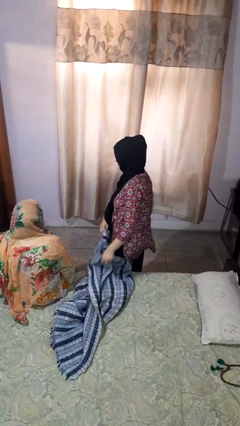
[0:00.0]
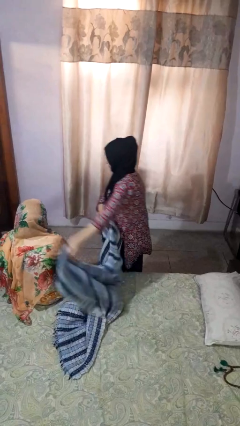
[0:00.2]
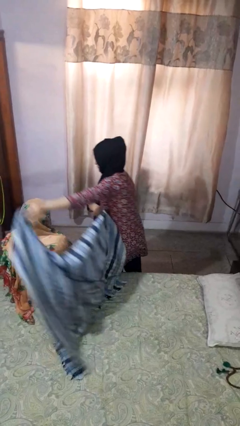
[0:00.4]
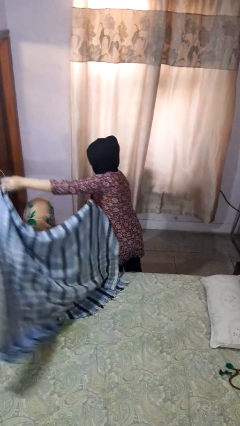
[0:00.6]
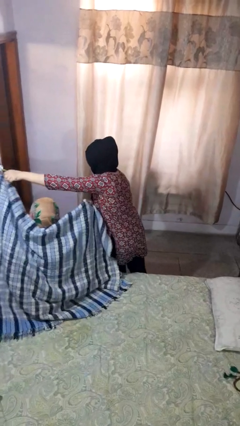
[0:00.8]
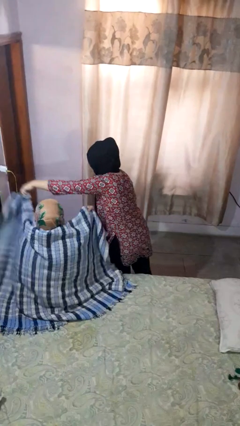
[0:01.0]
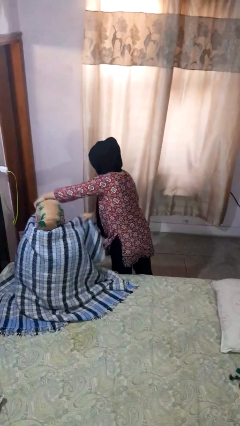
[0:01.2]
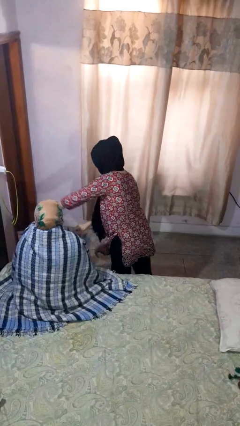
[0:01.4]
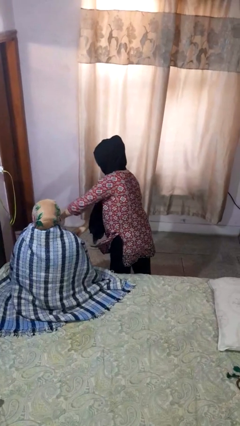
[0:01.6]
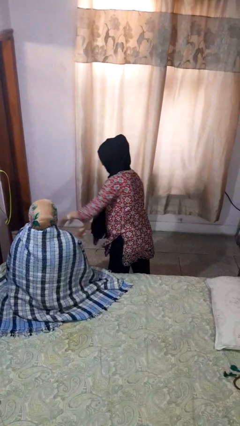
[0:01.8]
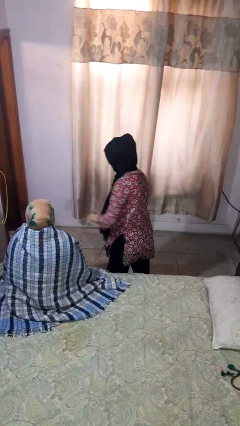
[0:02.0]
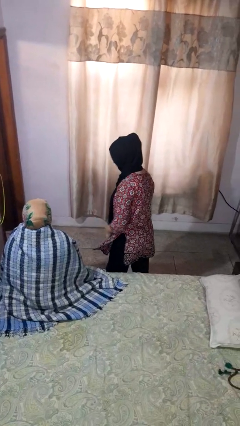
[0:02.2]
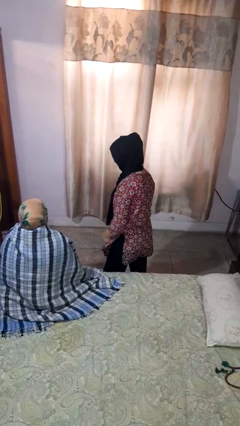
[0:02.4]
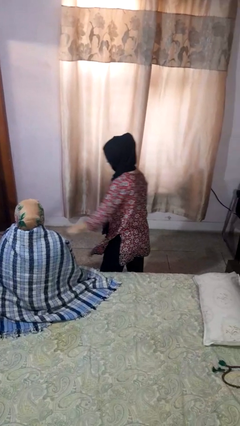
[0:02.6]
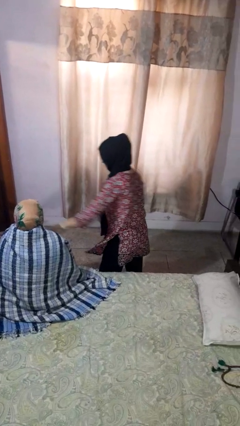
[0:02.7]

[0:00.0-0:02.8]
person covers friend with blanket

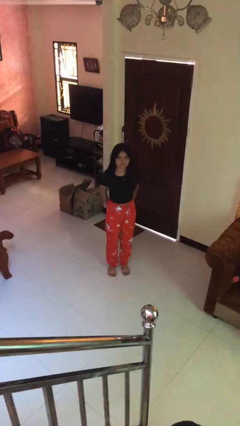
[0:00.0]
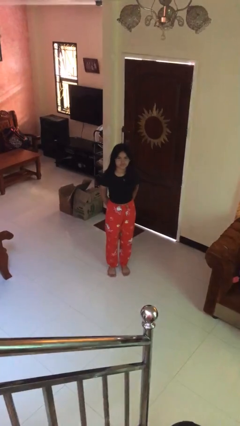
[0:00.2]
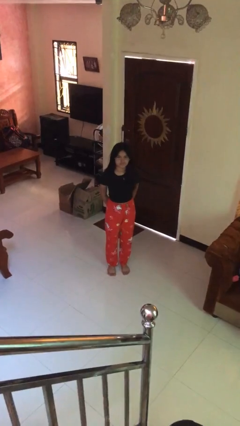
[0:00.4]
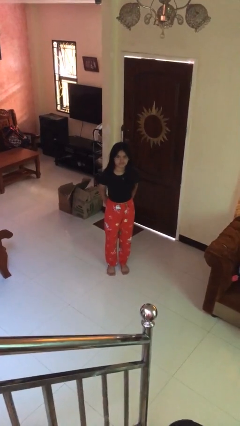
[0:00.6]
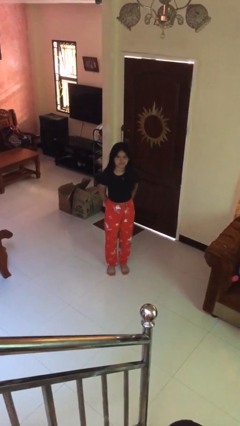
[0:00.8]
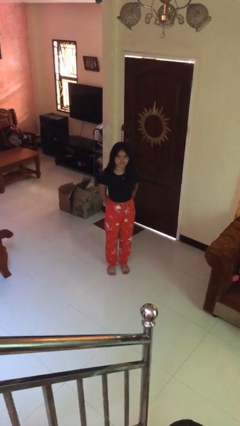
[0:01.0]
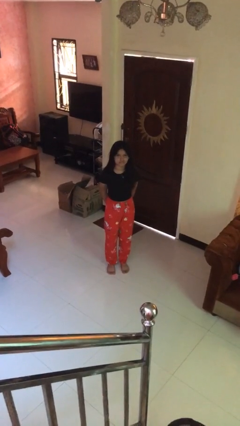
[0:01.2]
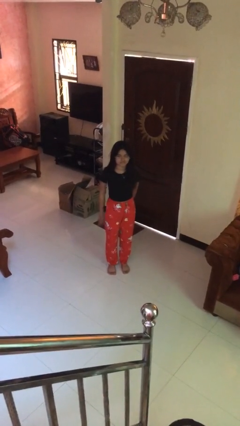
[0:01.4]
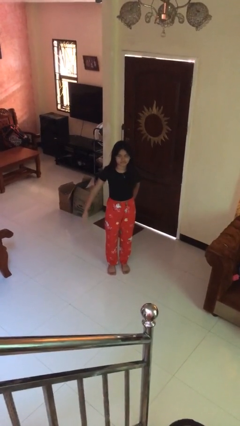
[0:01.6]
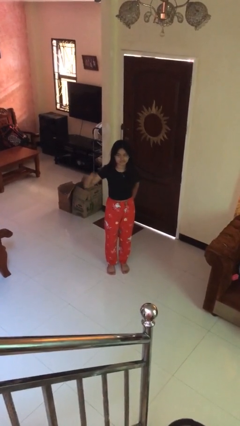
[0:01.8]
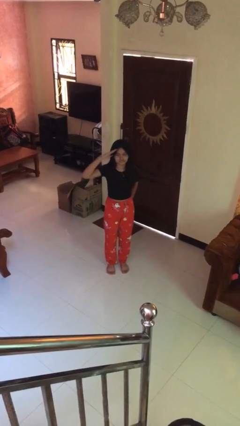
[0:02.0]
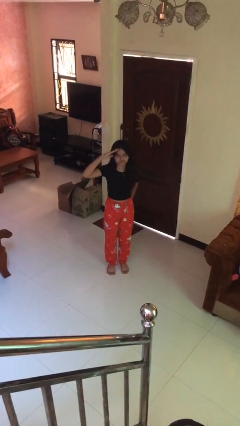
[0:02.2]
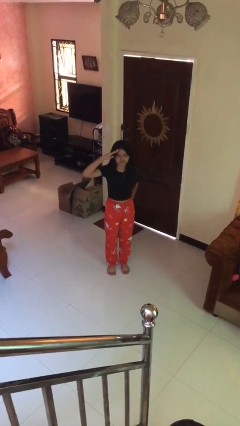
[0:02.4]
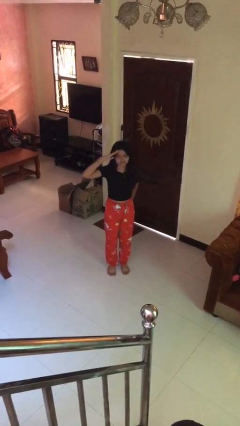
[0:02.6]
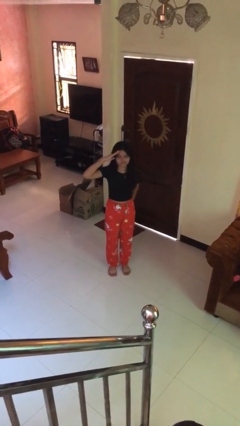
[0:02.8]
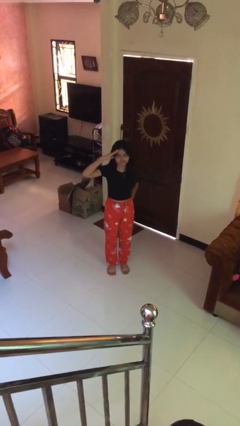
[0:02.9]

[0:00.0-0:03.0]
person salutes

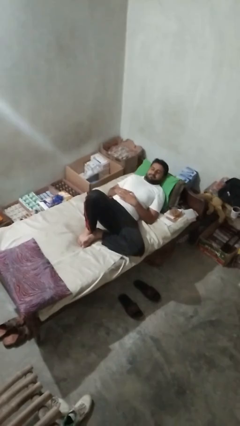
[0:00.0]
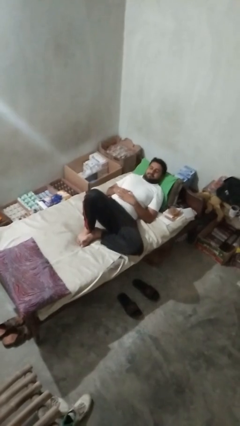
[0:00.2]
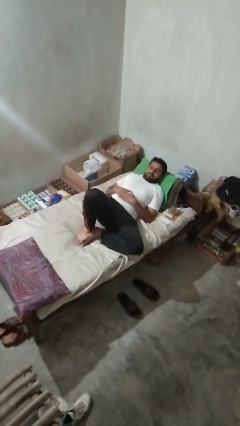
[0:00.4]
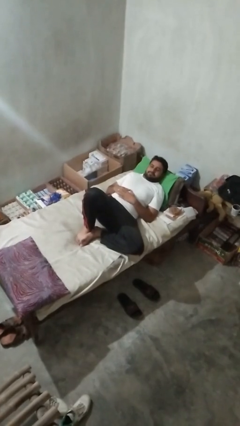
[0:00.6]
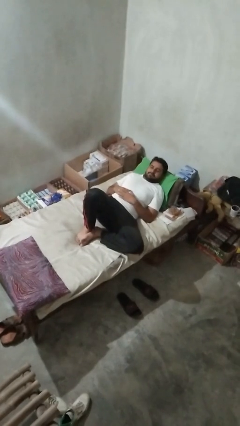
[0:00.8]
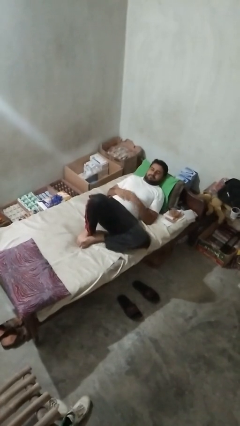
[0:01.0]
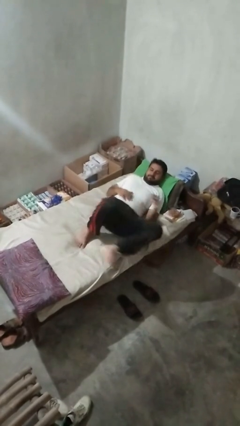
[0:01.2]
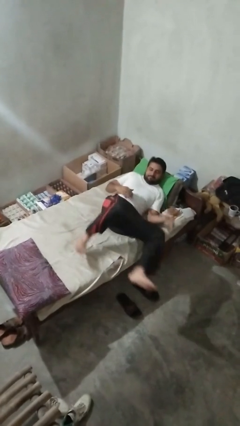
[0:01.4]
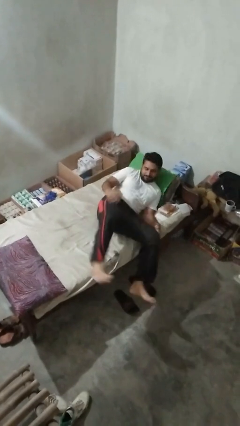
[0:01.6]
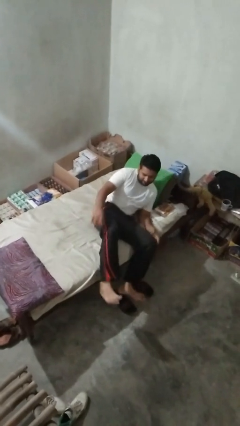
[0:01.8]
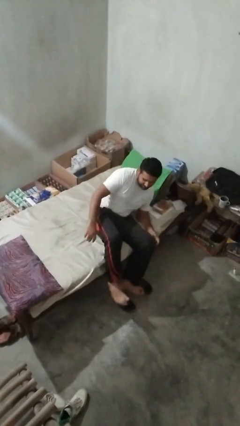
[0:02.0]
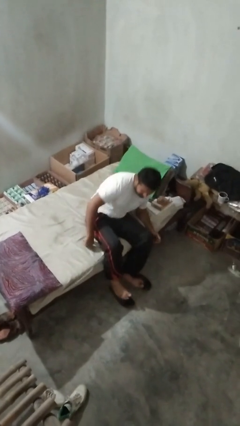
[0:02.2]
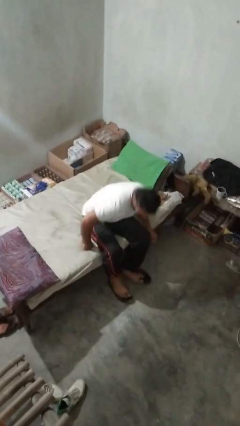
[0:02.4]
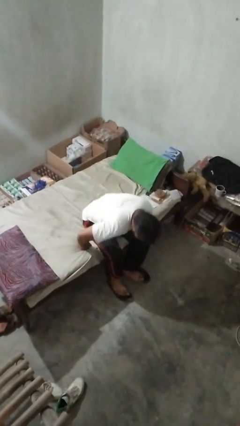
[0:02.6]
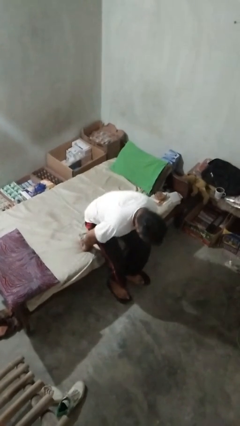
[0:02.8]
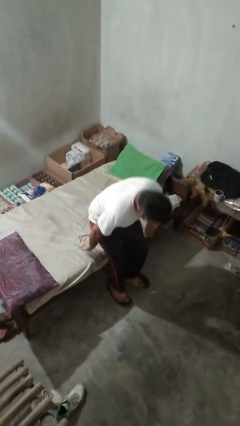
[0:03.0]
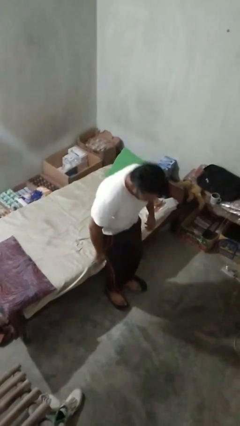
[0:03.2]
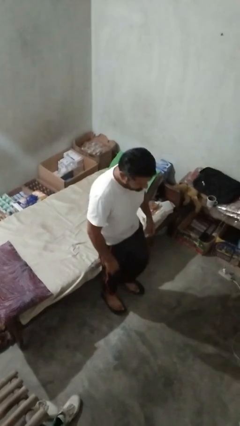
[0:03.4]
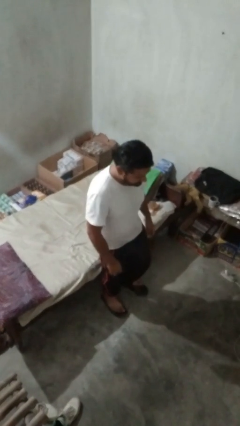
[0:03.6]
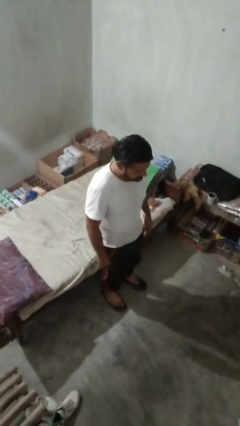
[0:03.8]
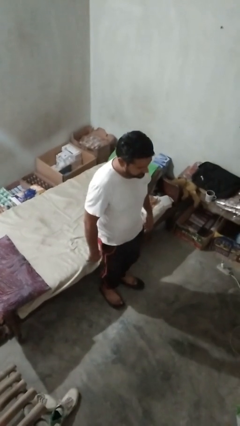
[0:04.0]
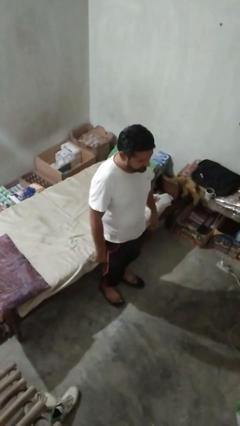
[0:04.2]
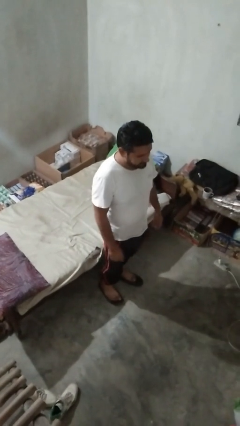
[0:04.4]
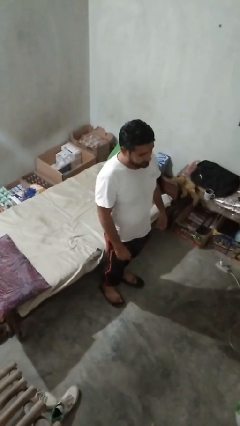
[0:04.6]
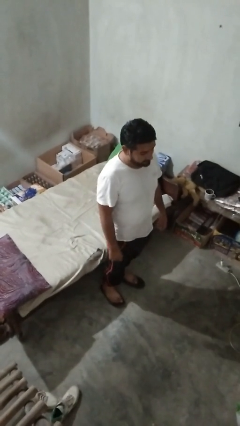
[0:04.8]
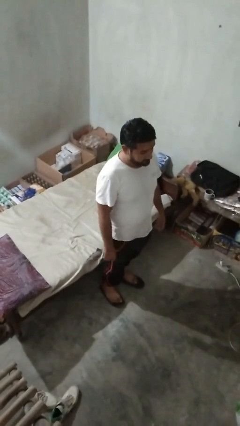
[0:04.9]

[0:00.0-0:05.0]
person stands up

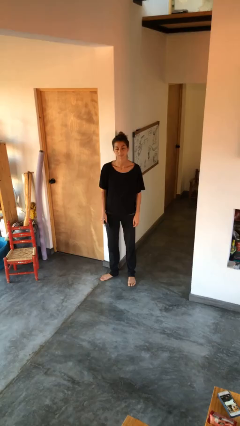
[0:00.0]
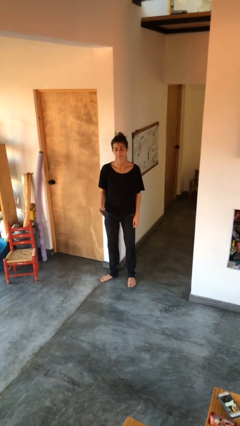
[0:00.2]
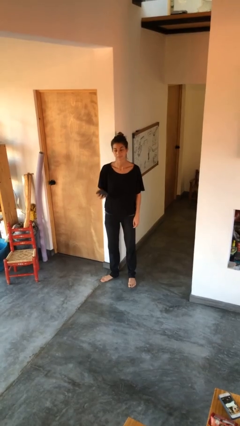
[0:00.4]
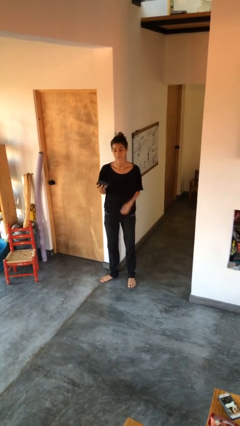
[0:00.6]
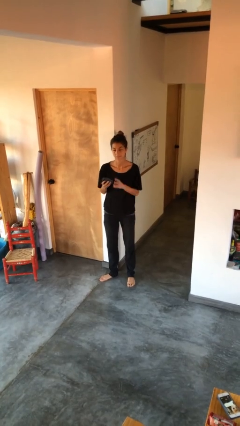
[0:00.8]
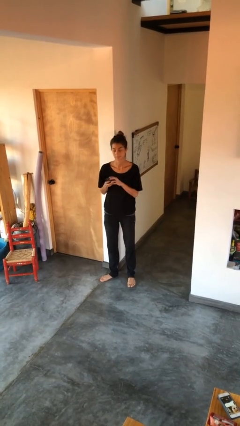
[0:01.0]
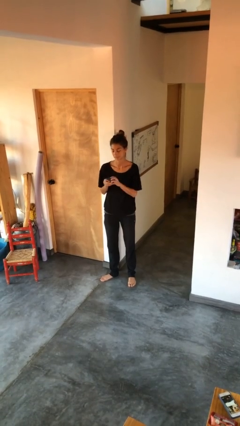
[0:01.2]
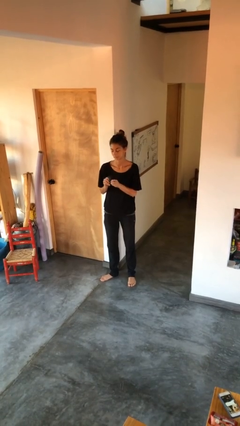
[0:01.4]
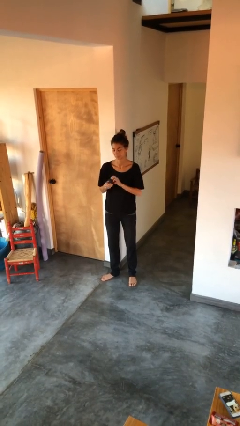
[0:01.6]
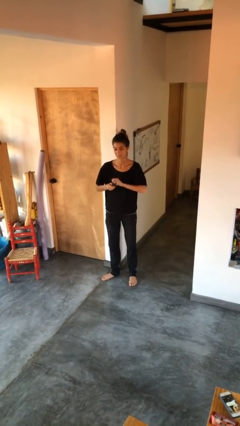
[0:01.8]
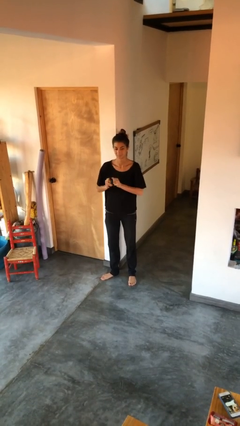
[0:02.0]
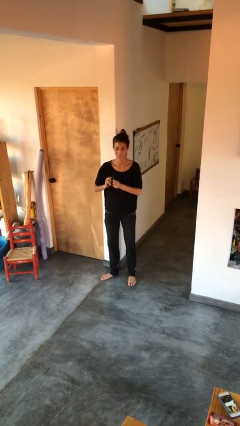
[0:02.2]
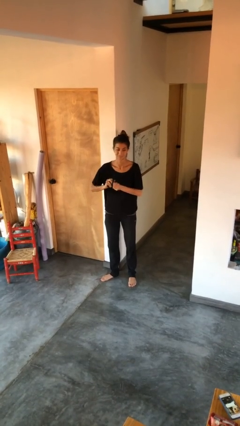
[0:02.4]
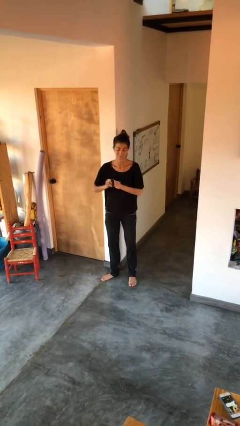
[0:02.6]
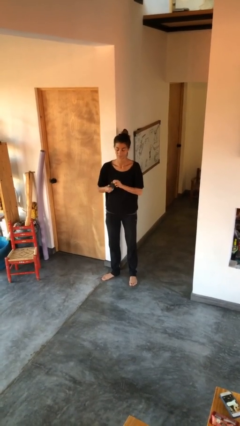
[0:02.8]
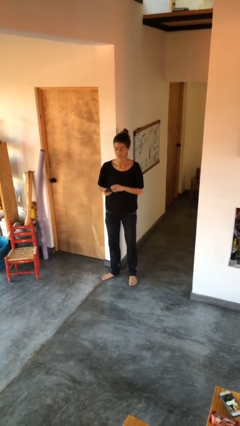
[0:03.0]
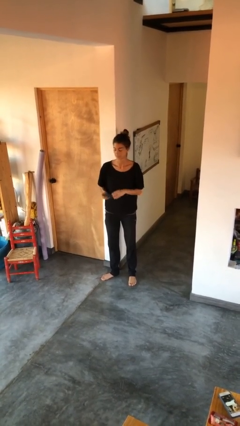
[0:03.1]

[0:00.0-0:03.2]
person squeezes object

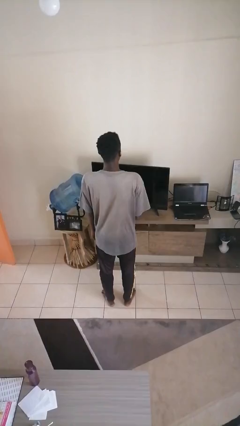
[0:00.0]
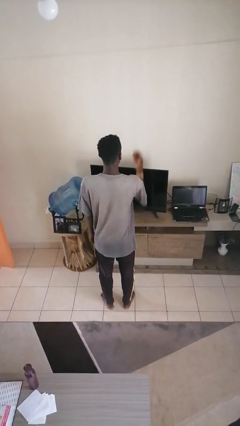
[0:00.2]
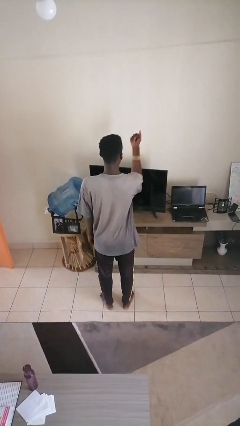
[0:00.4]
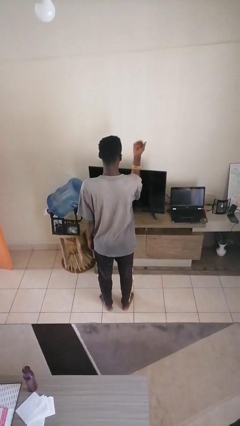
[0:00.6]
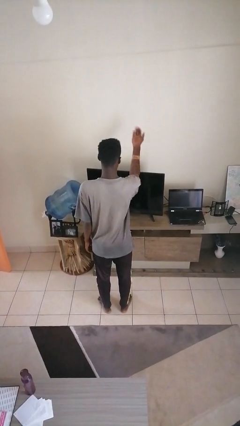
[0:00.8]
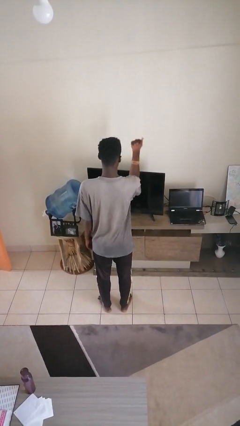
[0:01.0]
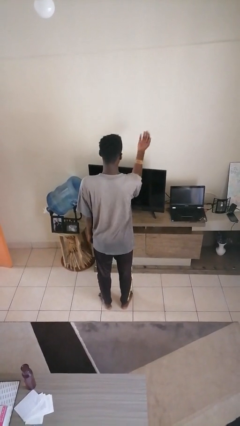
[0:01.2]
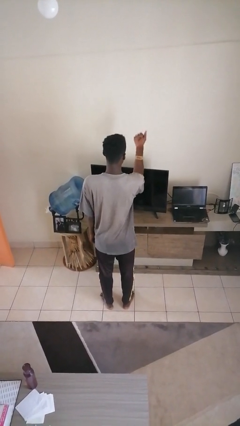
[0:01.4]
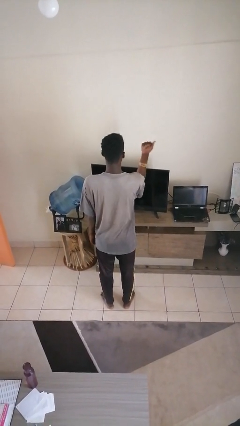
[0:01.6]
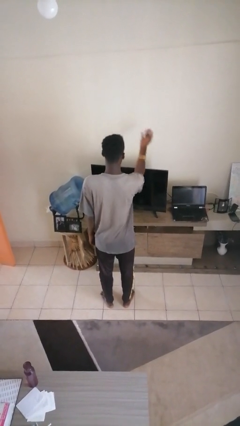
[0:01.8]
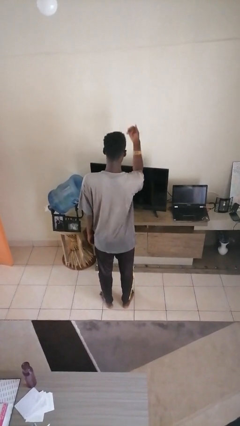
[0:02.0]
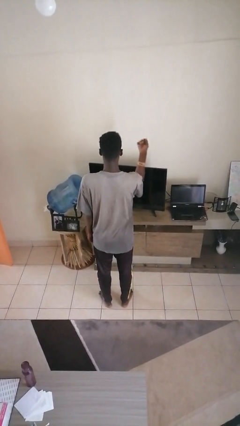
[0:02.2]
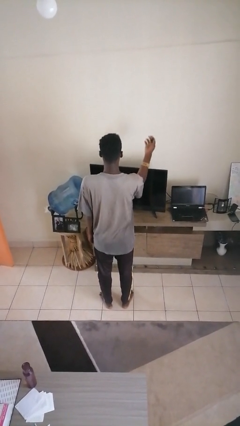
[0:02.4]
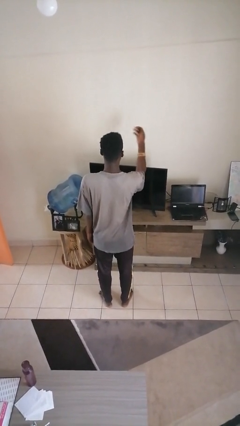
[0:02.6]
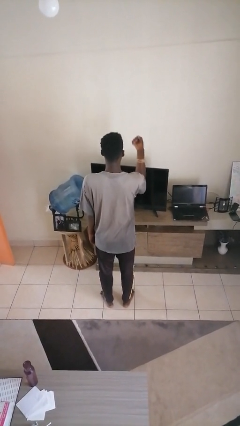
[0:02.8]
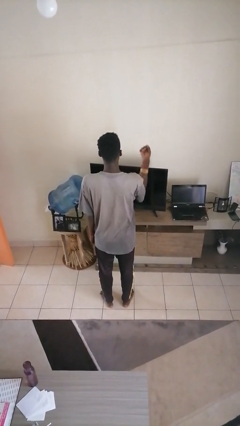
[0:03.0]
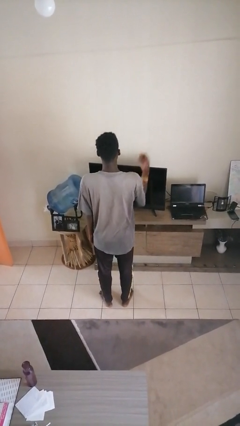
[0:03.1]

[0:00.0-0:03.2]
person gestures come here

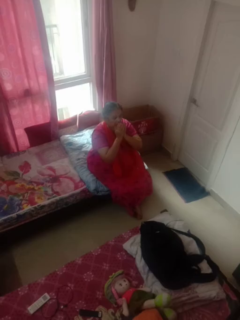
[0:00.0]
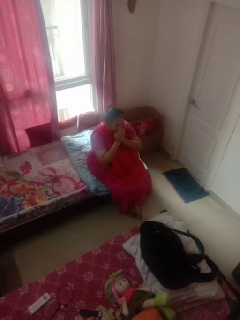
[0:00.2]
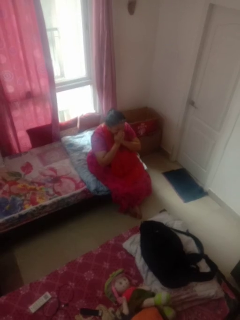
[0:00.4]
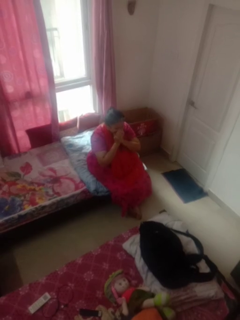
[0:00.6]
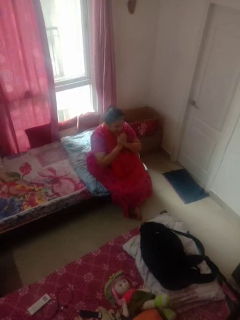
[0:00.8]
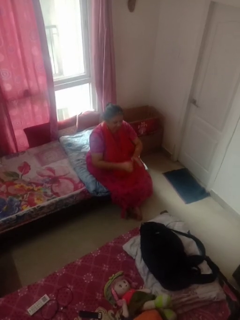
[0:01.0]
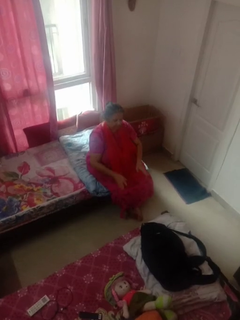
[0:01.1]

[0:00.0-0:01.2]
person sneezes into hand
